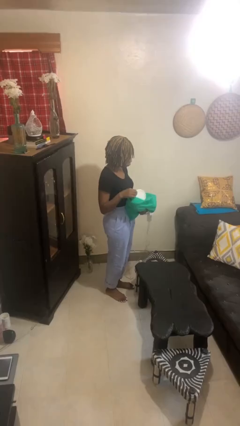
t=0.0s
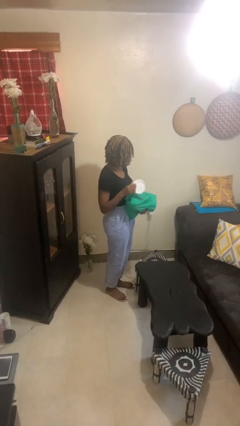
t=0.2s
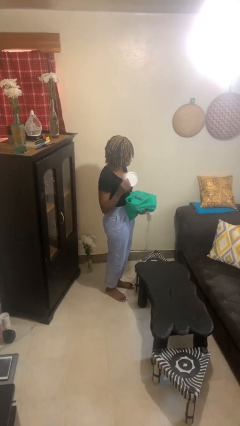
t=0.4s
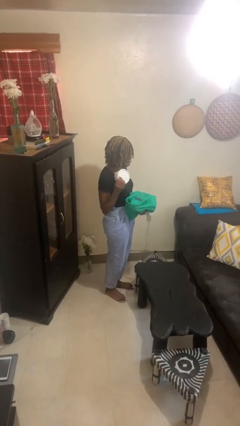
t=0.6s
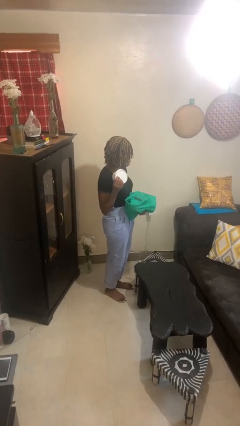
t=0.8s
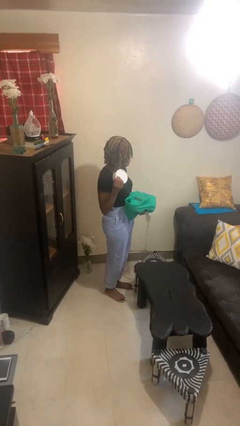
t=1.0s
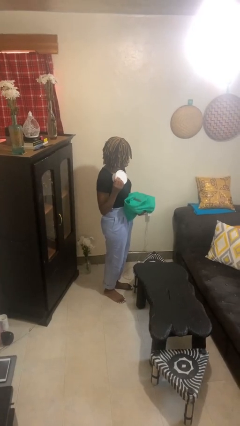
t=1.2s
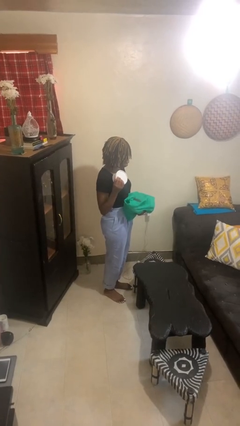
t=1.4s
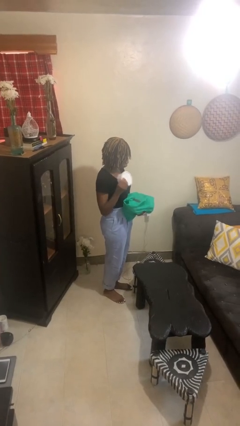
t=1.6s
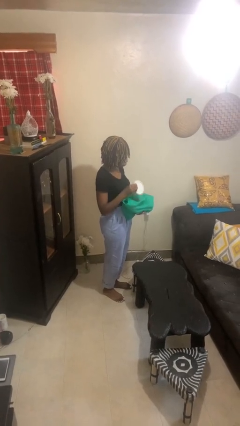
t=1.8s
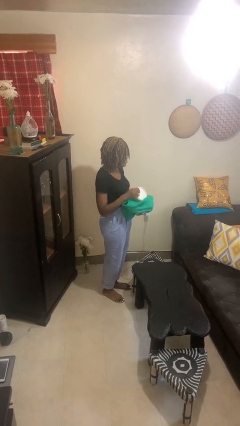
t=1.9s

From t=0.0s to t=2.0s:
person takes object from bag

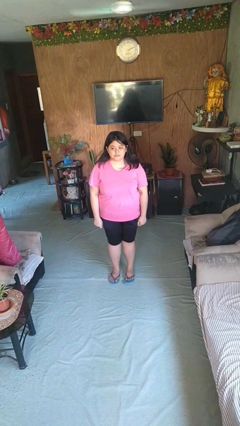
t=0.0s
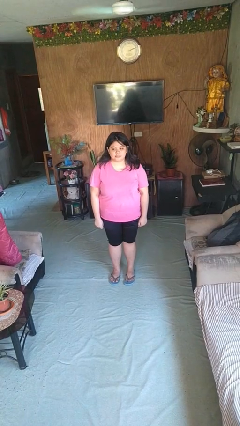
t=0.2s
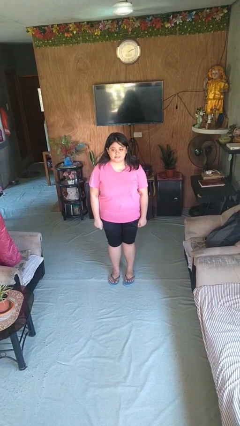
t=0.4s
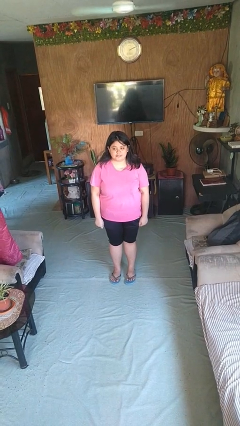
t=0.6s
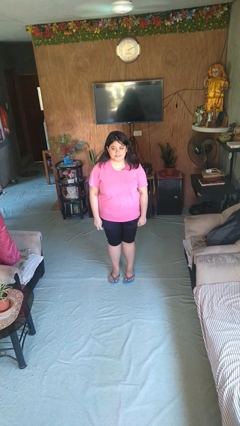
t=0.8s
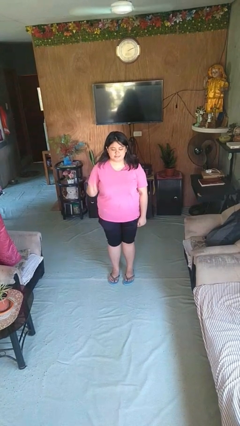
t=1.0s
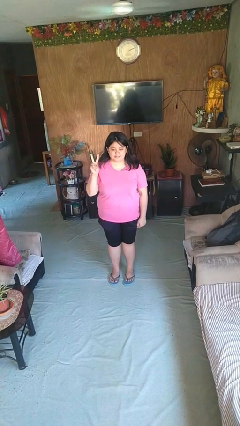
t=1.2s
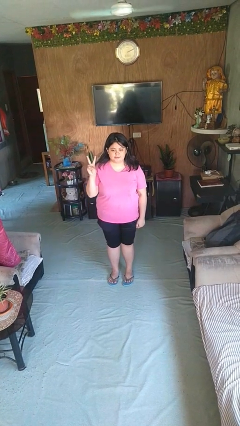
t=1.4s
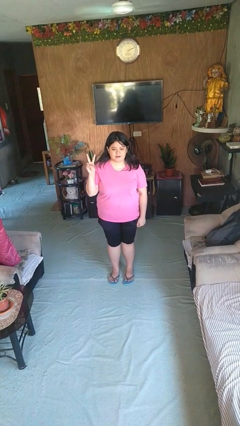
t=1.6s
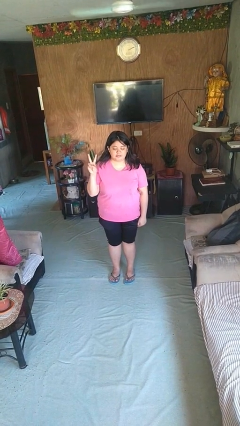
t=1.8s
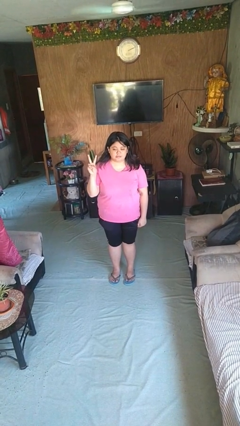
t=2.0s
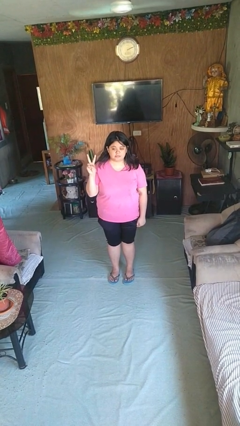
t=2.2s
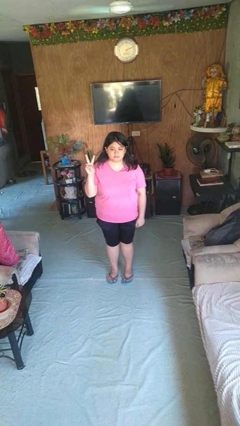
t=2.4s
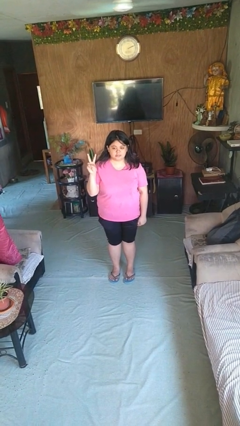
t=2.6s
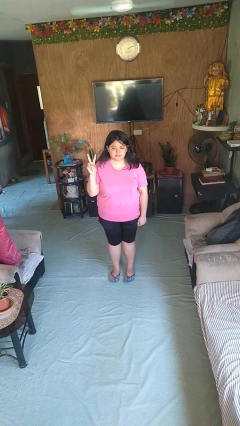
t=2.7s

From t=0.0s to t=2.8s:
person gestures peace

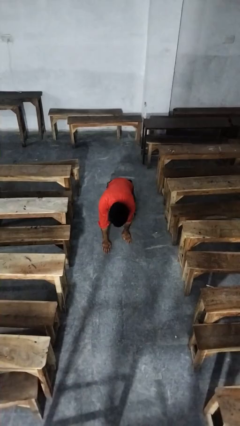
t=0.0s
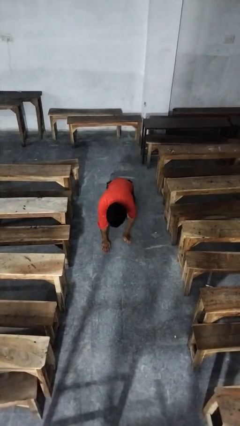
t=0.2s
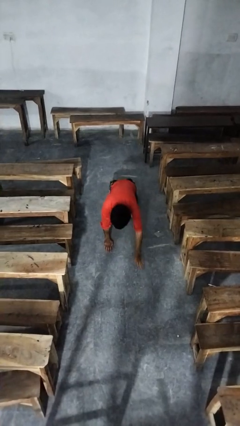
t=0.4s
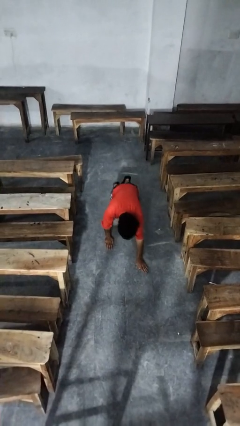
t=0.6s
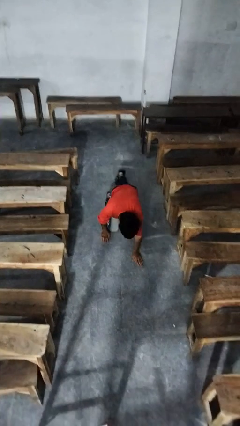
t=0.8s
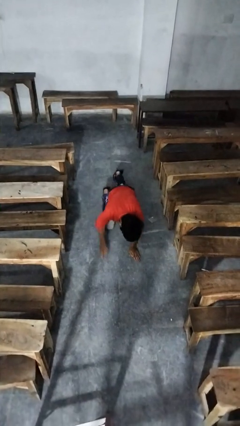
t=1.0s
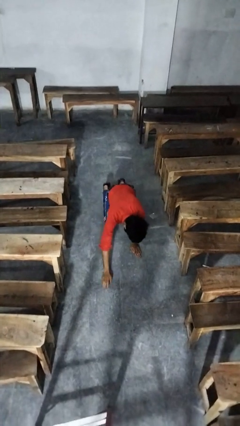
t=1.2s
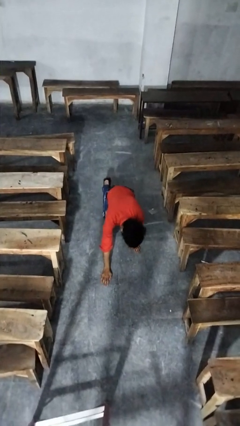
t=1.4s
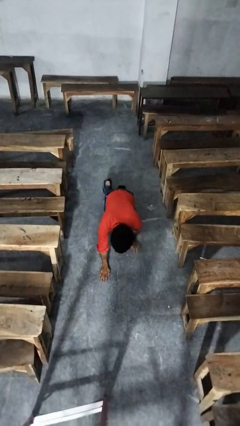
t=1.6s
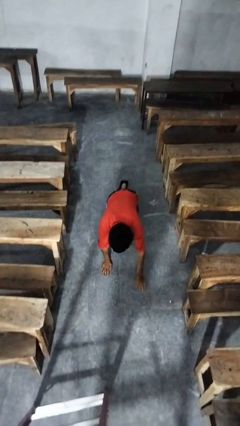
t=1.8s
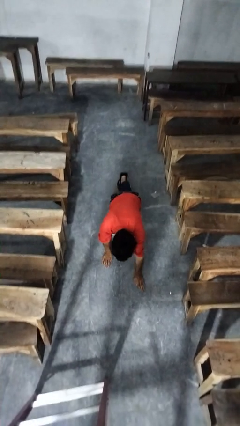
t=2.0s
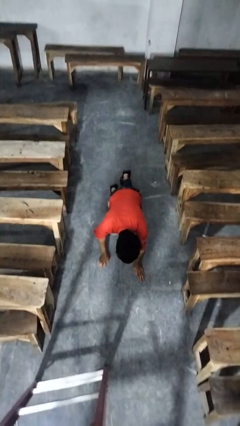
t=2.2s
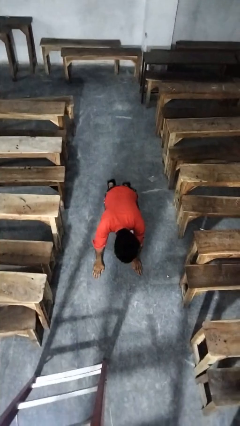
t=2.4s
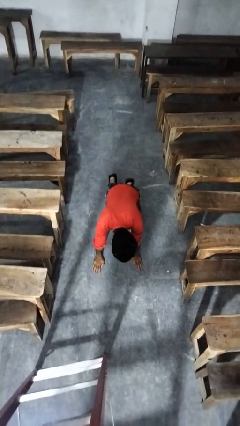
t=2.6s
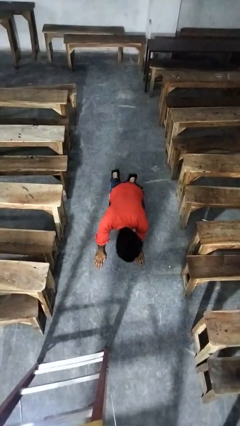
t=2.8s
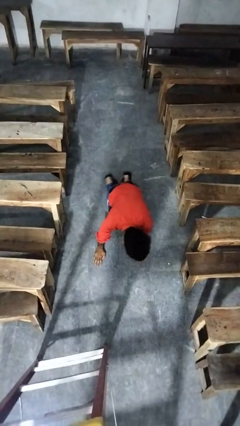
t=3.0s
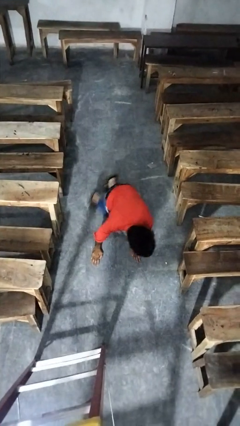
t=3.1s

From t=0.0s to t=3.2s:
person crawls

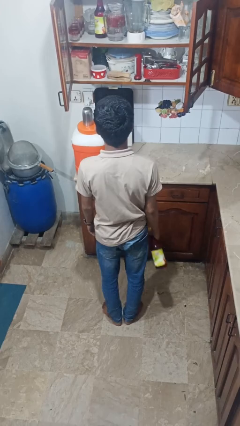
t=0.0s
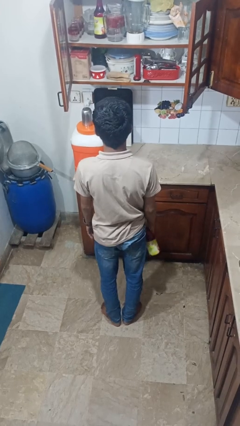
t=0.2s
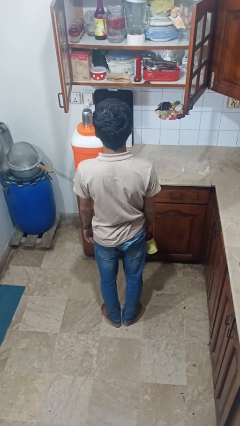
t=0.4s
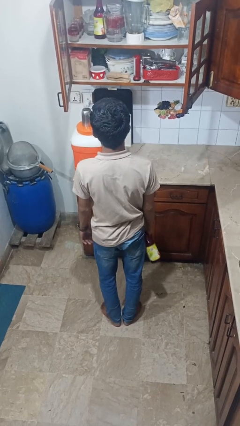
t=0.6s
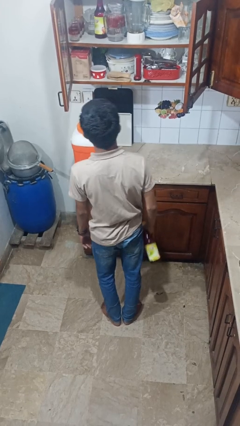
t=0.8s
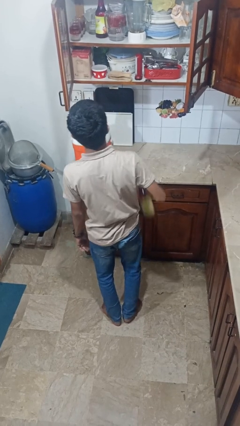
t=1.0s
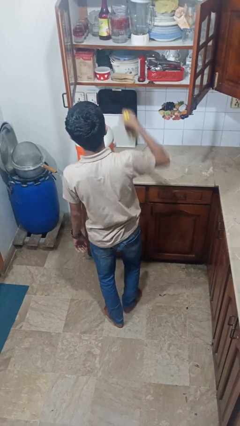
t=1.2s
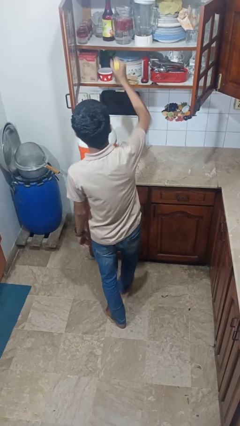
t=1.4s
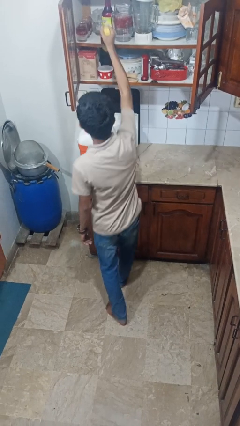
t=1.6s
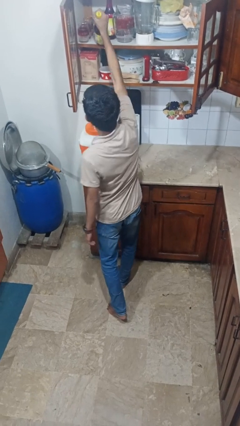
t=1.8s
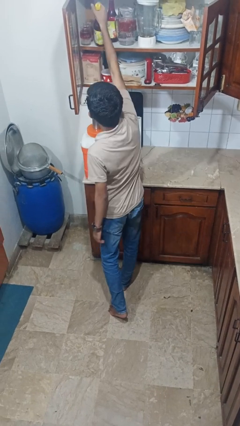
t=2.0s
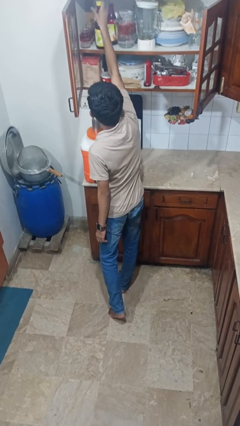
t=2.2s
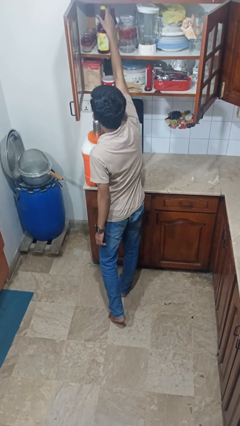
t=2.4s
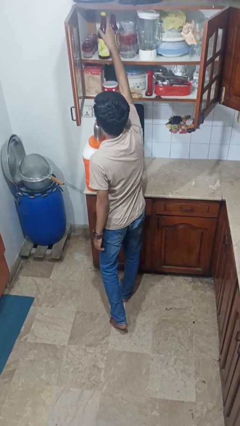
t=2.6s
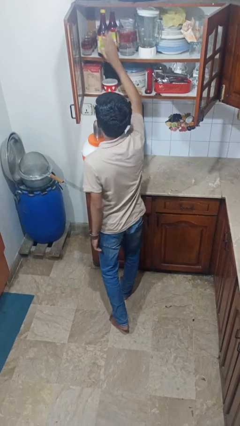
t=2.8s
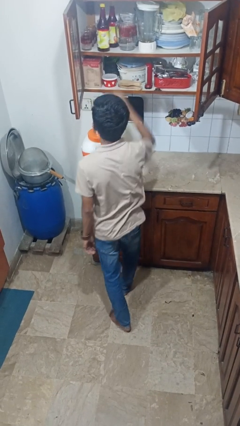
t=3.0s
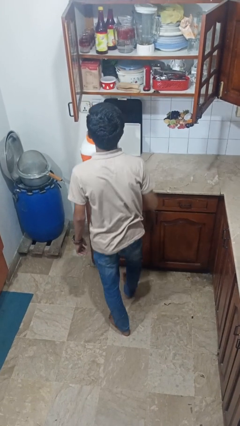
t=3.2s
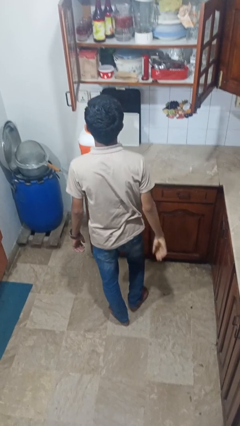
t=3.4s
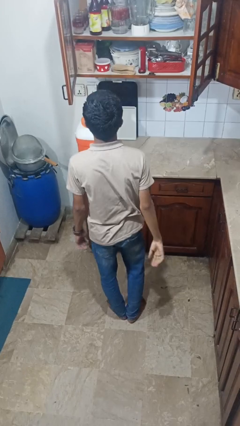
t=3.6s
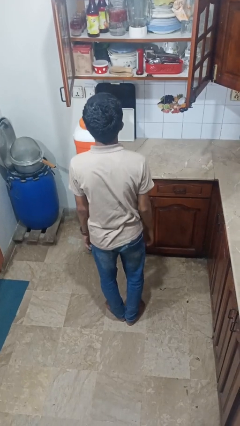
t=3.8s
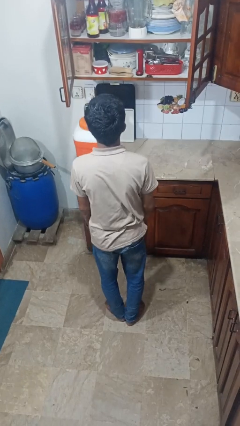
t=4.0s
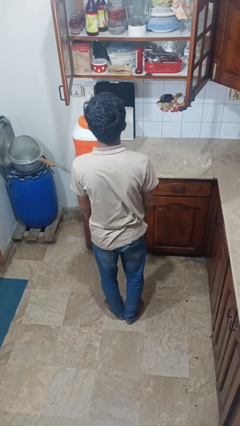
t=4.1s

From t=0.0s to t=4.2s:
person puts down object into cabinet

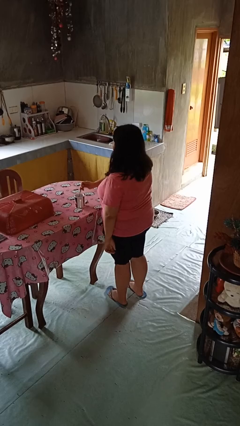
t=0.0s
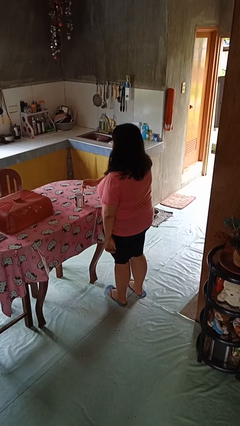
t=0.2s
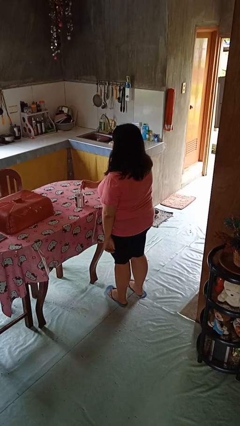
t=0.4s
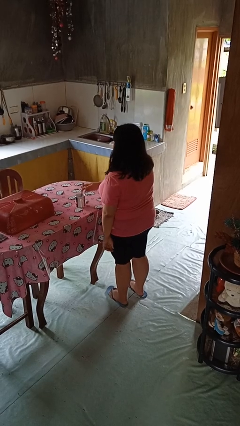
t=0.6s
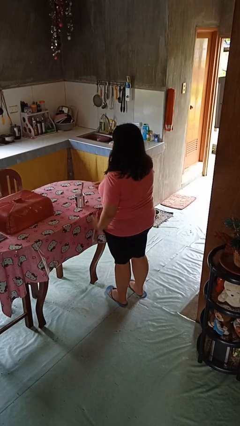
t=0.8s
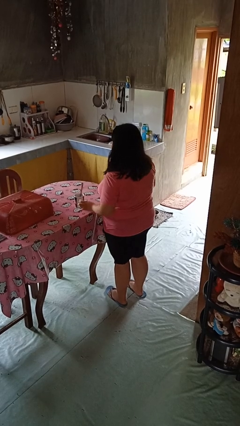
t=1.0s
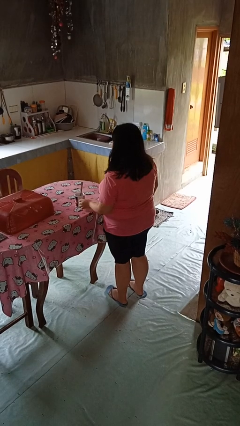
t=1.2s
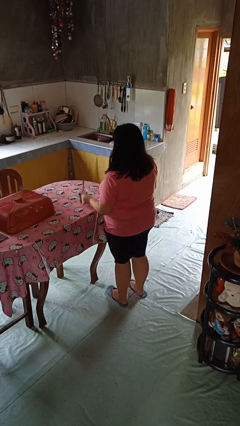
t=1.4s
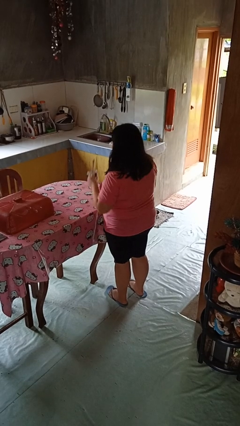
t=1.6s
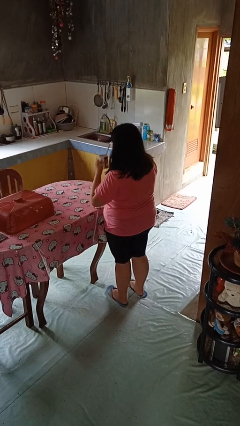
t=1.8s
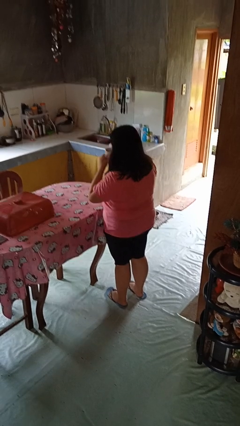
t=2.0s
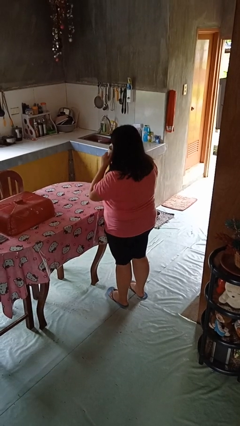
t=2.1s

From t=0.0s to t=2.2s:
person stirs mug

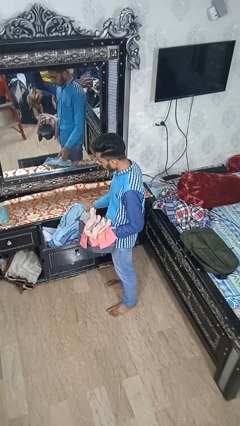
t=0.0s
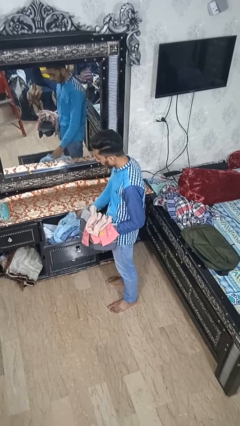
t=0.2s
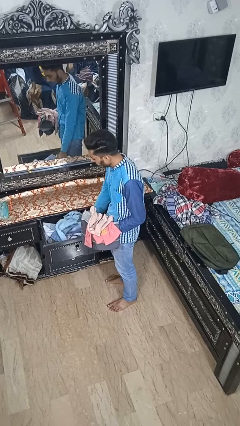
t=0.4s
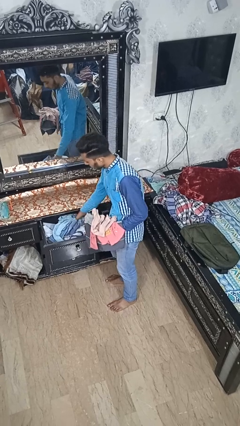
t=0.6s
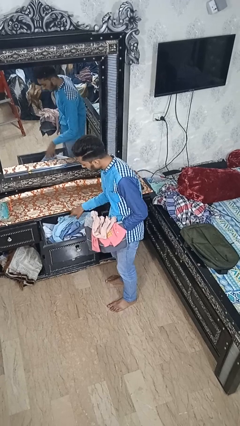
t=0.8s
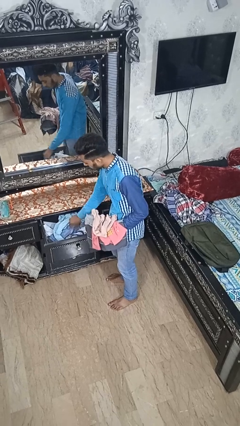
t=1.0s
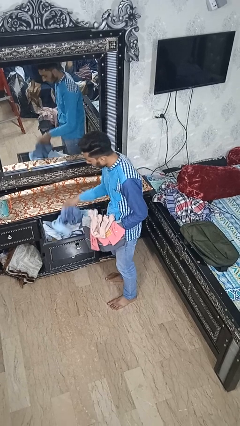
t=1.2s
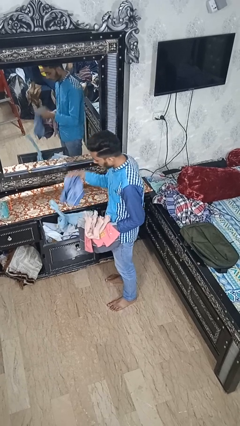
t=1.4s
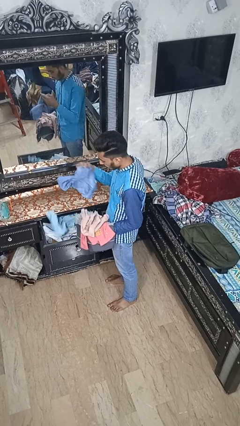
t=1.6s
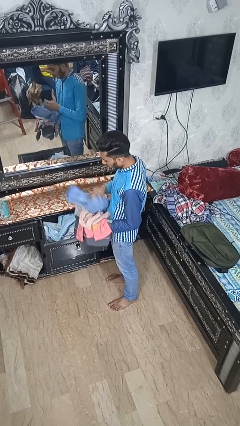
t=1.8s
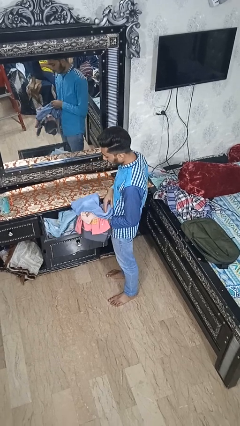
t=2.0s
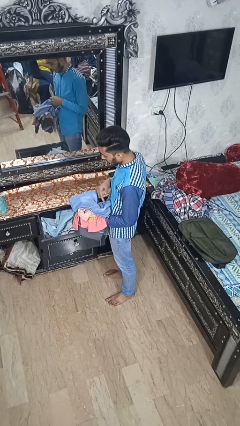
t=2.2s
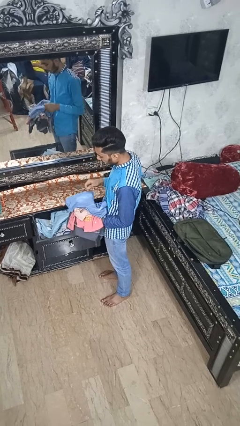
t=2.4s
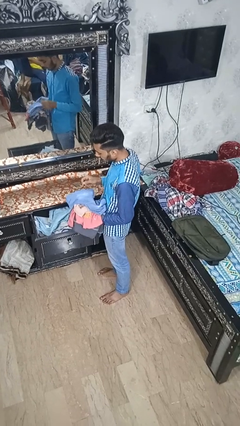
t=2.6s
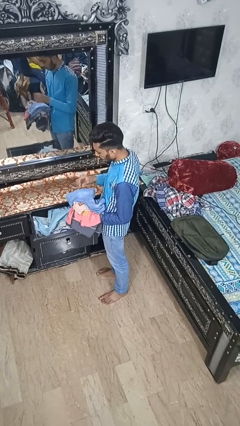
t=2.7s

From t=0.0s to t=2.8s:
person takes clothes from dresser
